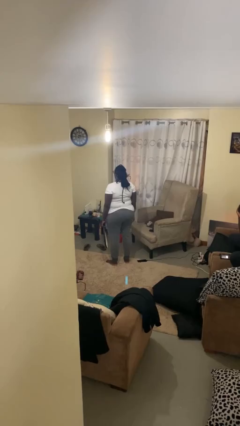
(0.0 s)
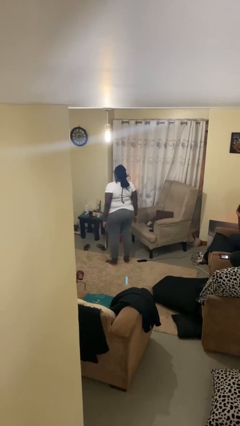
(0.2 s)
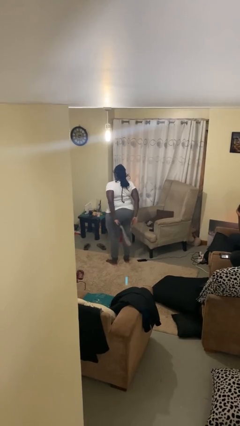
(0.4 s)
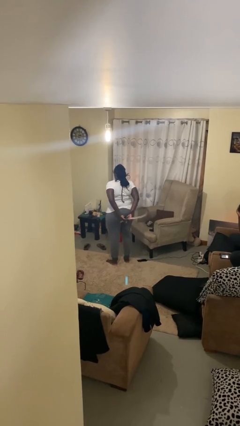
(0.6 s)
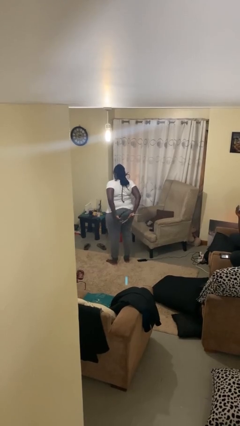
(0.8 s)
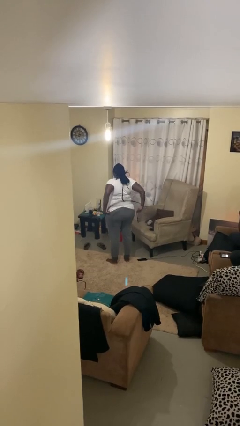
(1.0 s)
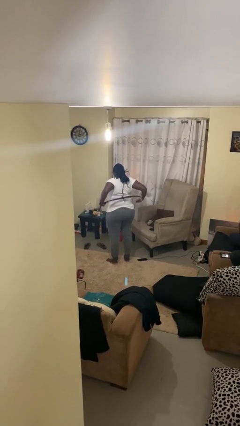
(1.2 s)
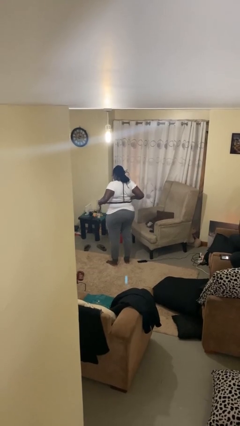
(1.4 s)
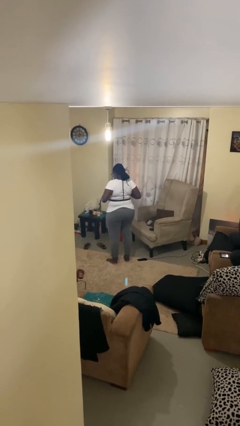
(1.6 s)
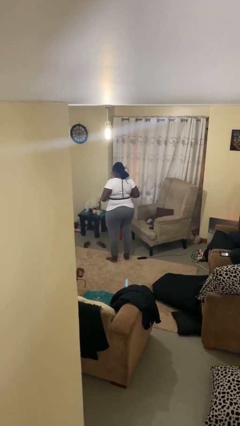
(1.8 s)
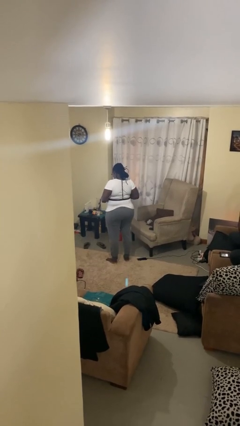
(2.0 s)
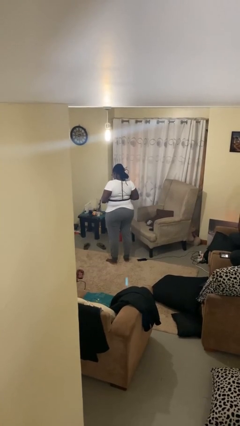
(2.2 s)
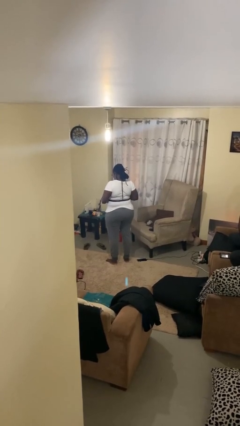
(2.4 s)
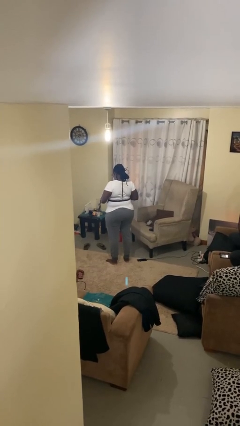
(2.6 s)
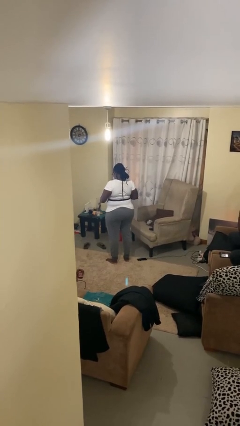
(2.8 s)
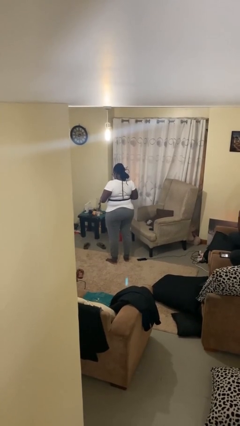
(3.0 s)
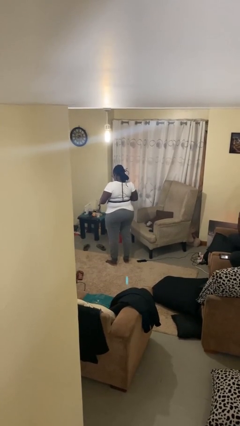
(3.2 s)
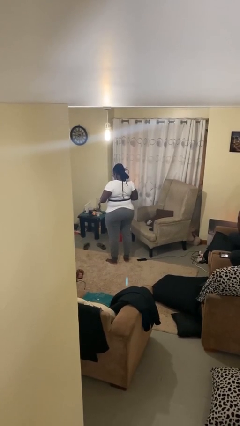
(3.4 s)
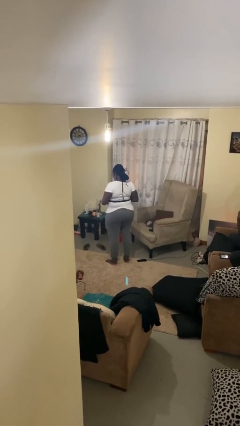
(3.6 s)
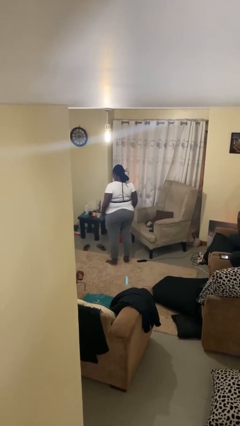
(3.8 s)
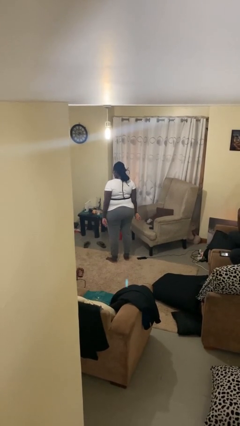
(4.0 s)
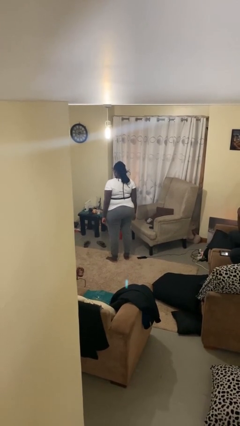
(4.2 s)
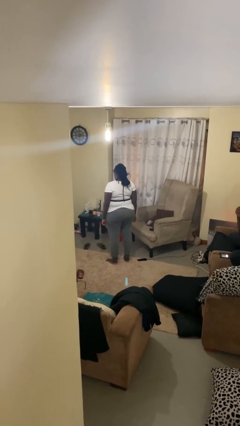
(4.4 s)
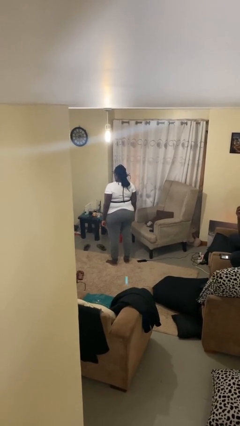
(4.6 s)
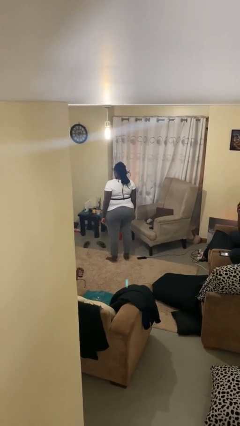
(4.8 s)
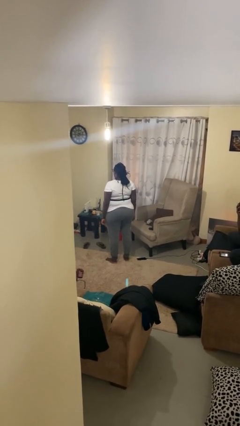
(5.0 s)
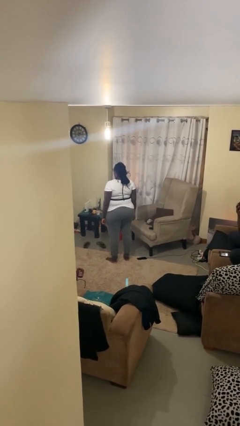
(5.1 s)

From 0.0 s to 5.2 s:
person puts on belt

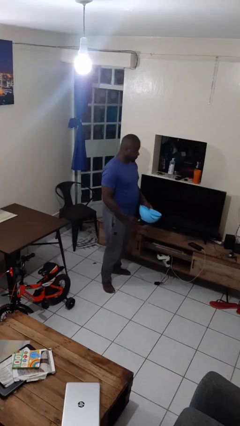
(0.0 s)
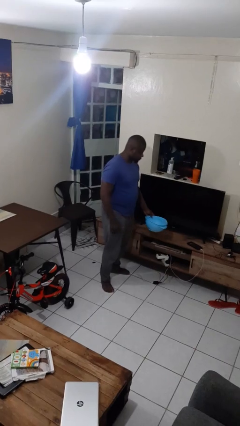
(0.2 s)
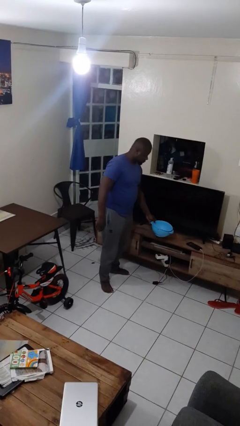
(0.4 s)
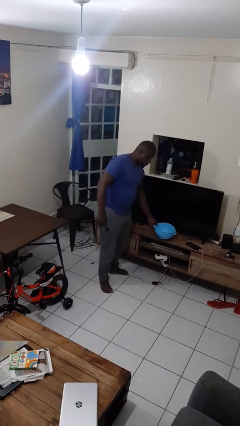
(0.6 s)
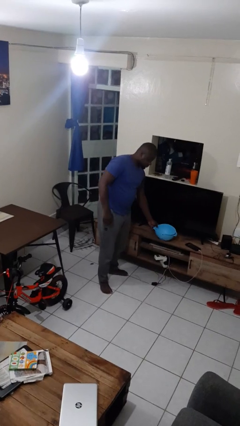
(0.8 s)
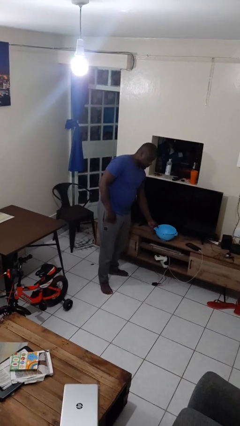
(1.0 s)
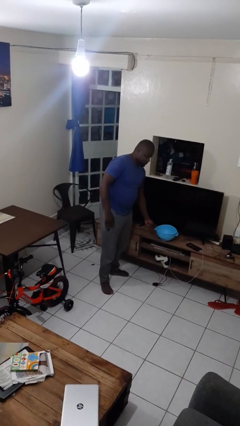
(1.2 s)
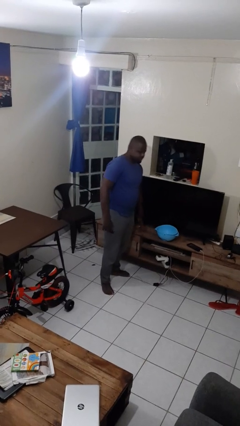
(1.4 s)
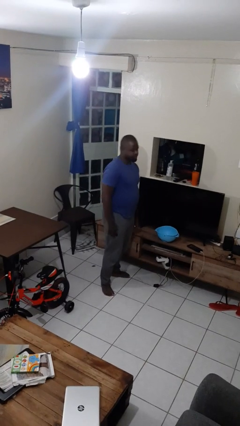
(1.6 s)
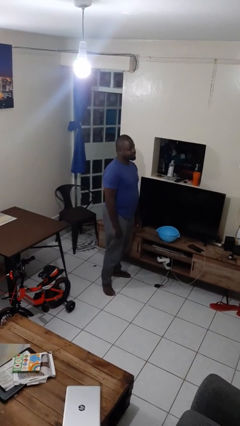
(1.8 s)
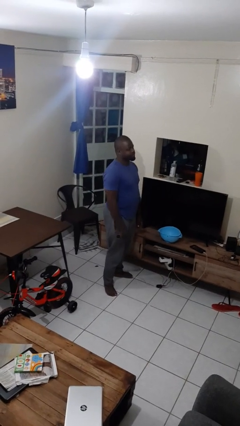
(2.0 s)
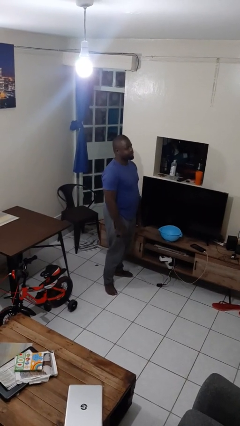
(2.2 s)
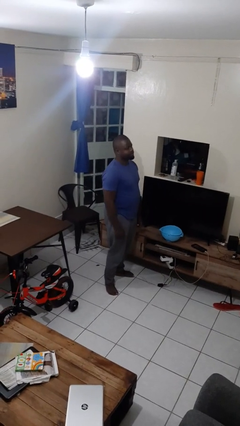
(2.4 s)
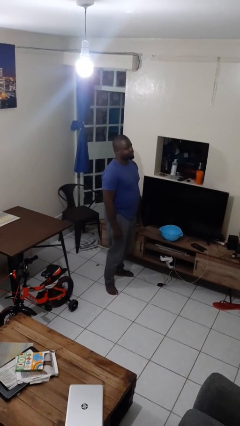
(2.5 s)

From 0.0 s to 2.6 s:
person puts down object on countertop

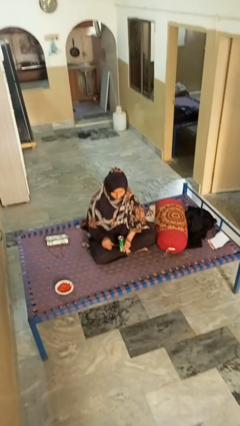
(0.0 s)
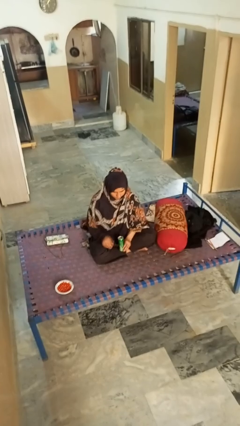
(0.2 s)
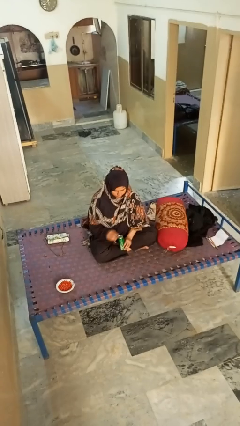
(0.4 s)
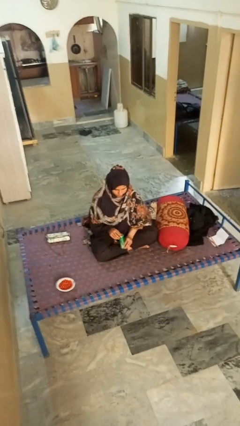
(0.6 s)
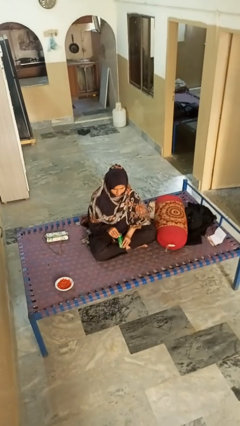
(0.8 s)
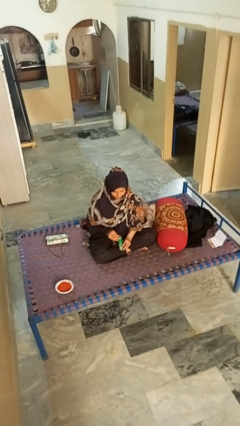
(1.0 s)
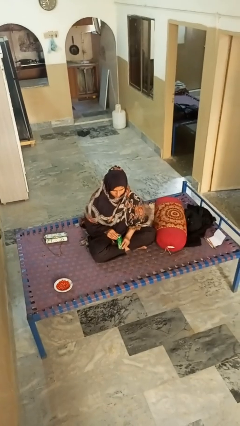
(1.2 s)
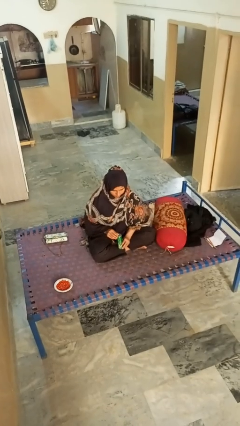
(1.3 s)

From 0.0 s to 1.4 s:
person opens can with can opener

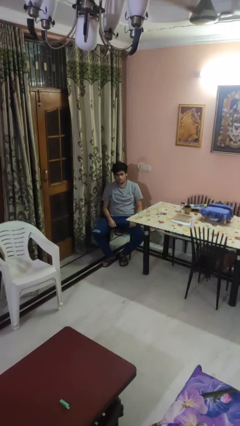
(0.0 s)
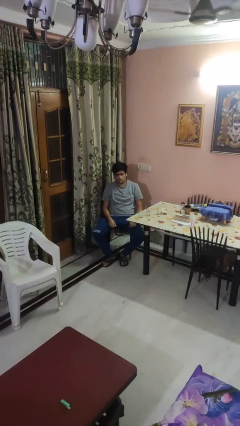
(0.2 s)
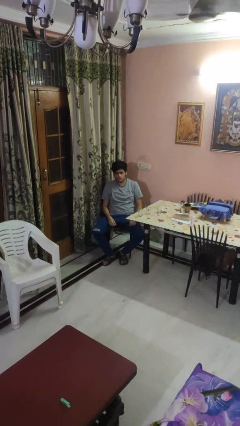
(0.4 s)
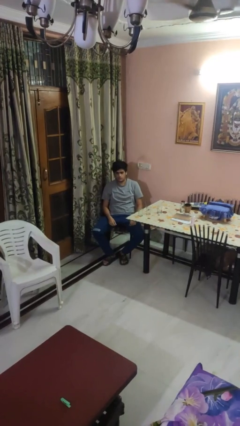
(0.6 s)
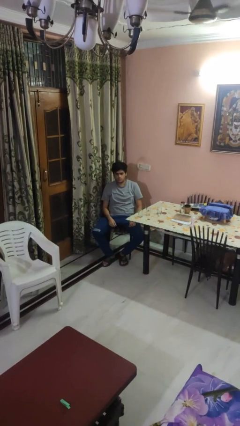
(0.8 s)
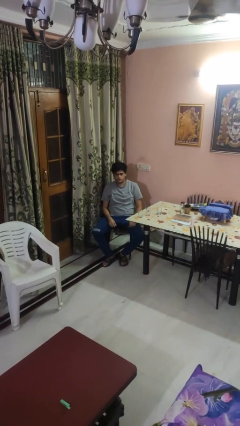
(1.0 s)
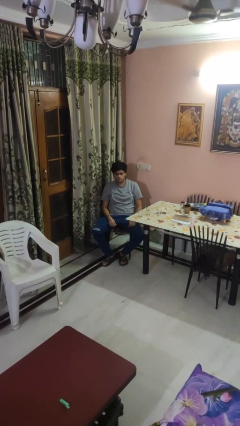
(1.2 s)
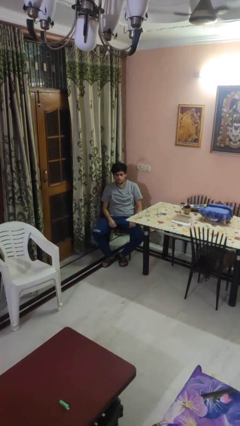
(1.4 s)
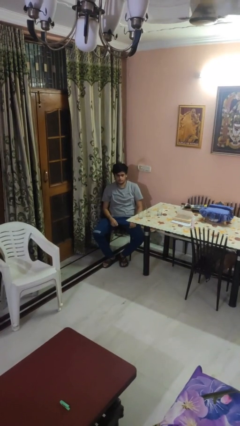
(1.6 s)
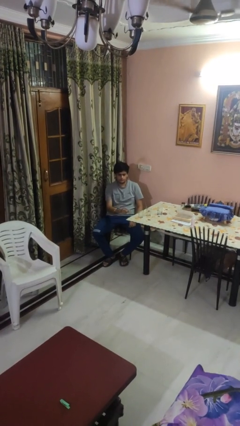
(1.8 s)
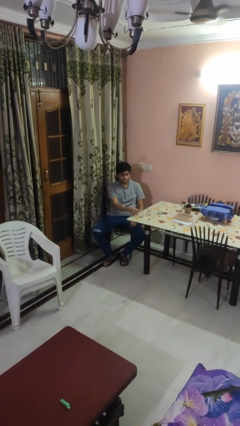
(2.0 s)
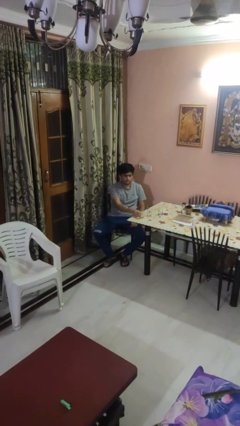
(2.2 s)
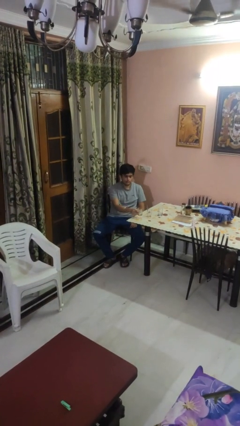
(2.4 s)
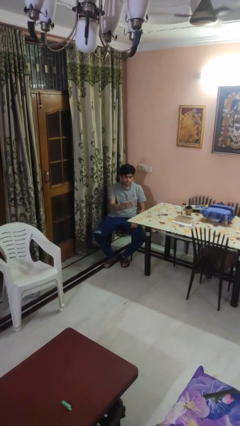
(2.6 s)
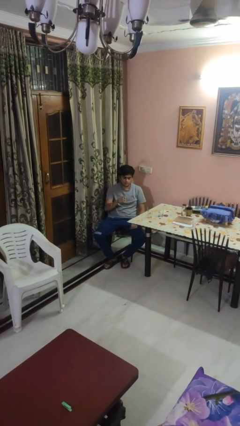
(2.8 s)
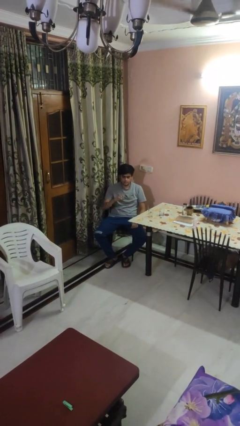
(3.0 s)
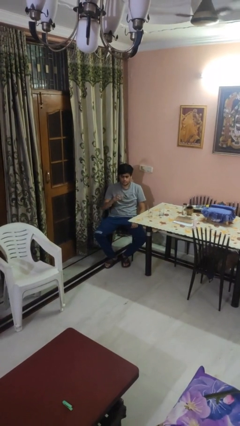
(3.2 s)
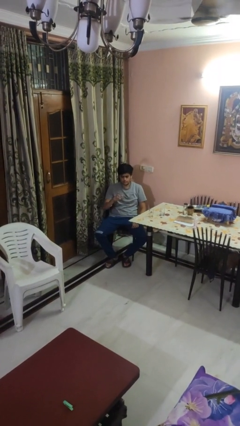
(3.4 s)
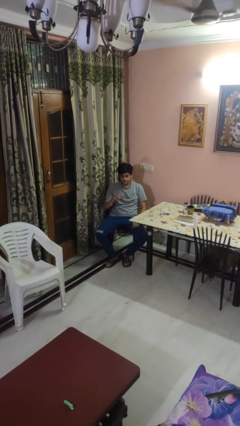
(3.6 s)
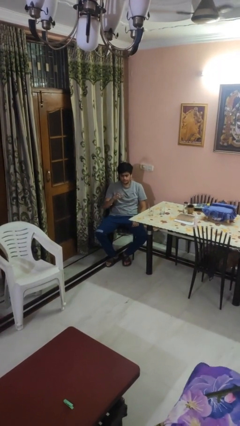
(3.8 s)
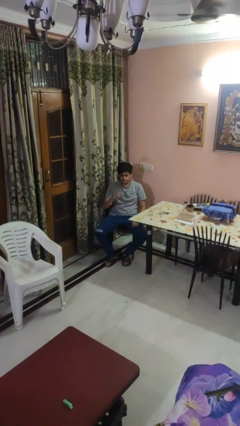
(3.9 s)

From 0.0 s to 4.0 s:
person picks up object from table

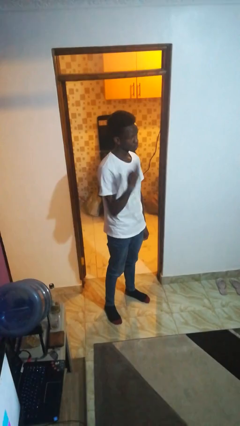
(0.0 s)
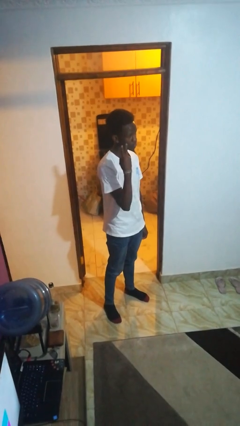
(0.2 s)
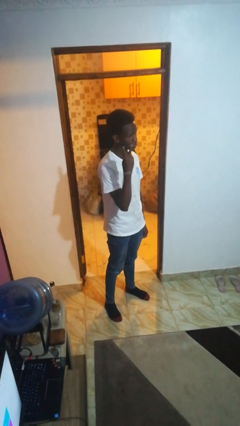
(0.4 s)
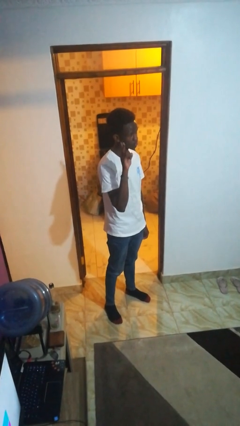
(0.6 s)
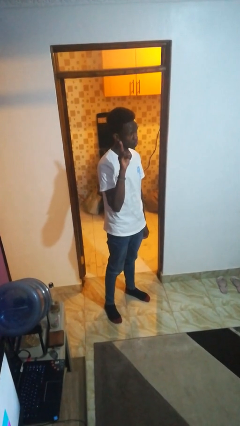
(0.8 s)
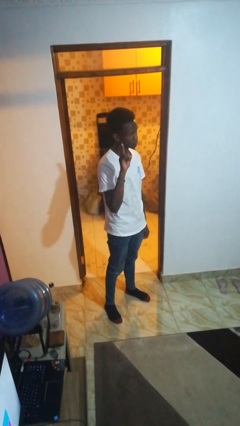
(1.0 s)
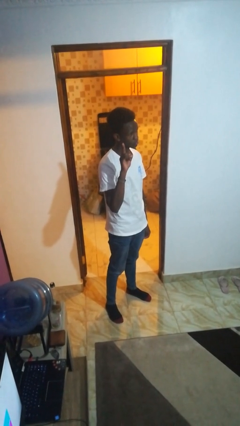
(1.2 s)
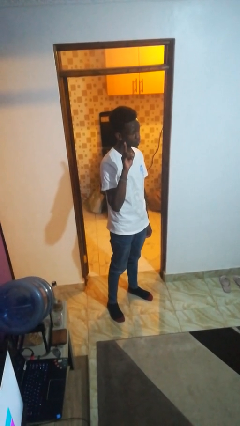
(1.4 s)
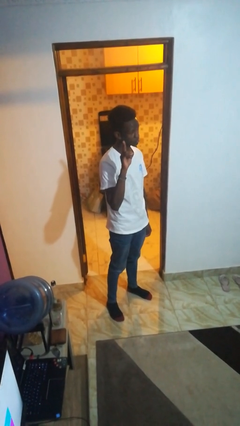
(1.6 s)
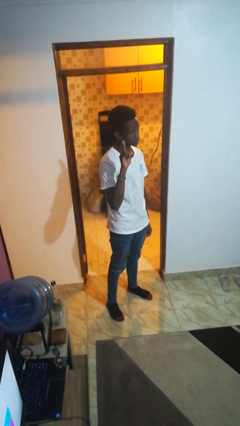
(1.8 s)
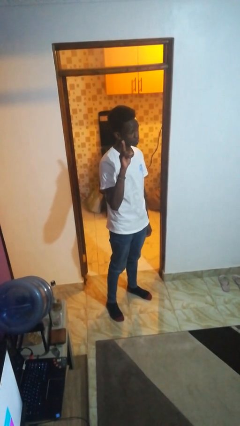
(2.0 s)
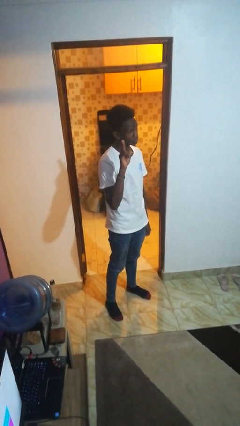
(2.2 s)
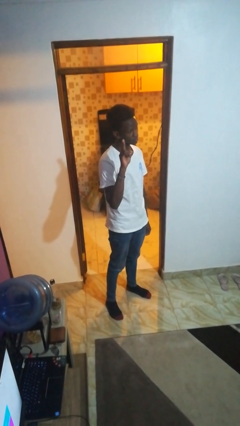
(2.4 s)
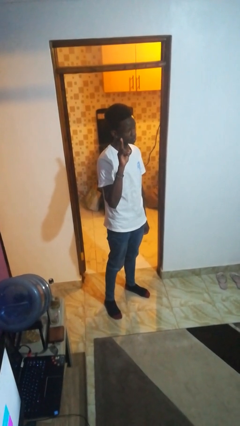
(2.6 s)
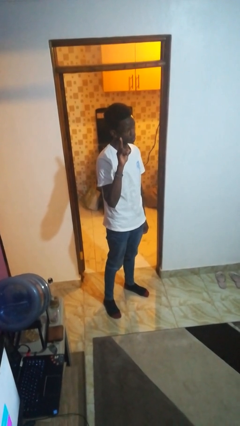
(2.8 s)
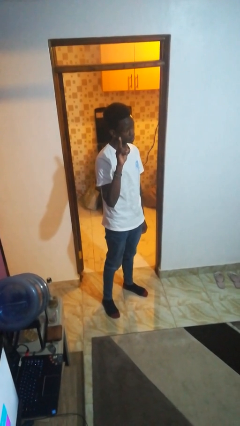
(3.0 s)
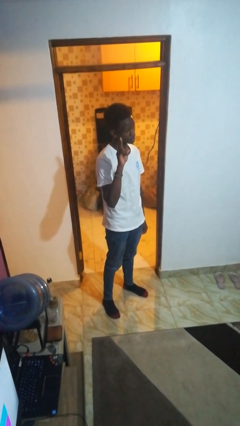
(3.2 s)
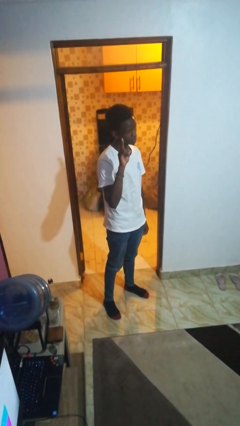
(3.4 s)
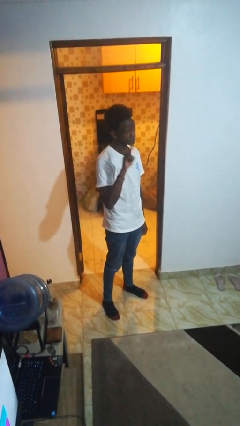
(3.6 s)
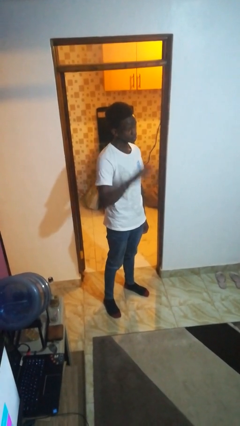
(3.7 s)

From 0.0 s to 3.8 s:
person gestures peace

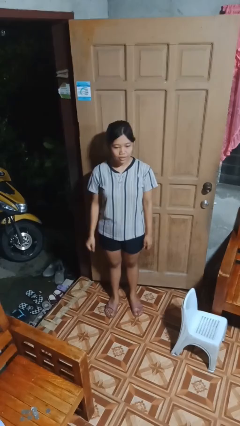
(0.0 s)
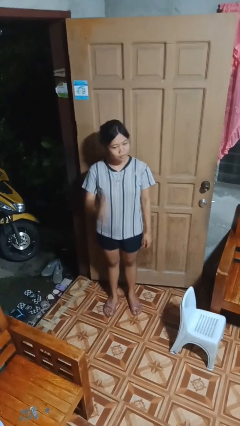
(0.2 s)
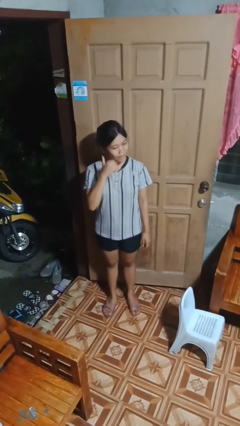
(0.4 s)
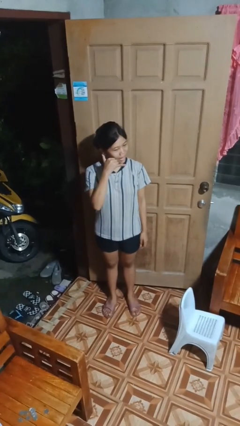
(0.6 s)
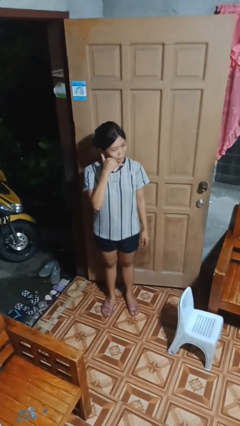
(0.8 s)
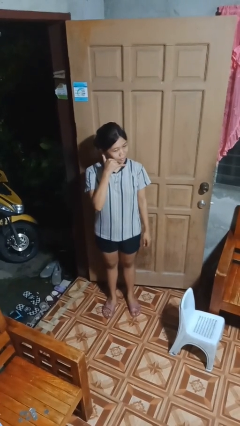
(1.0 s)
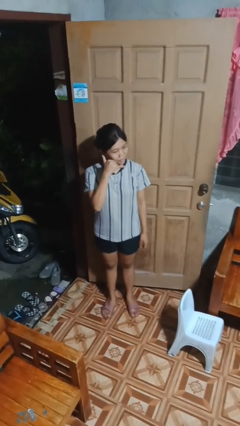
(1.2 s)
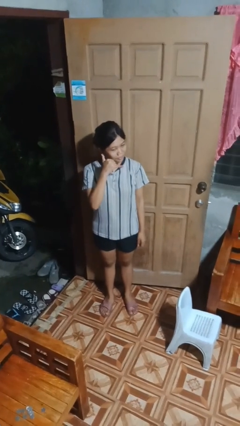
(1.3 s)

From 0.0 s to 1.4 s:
person gestures call me
